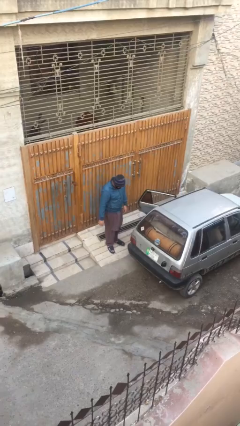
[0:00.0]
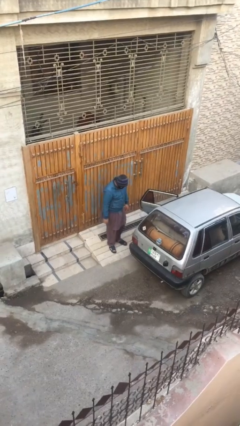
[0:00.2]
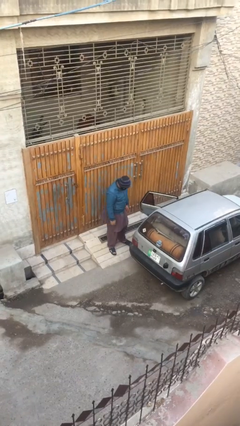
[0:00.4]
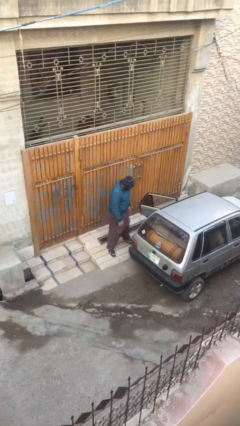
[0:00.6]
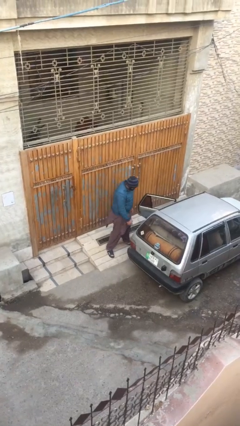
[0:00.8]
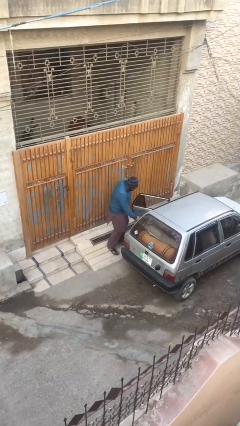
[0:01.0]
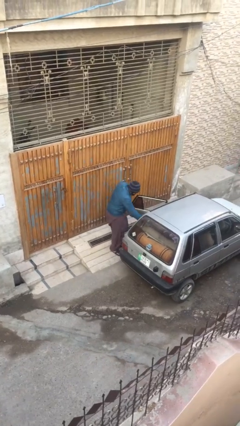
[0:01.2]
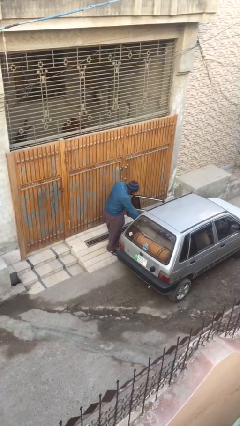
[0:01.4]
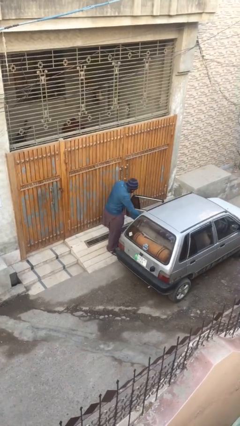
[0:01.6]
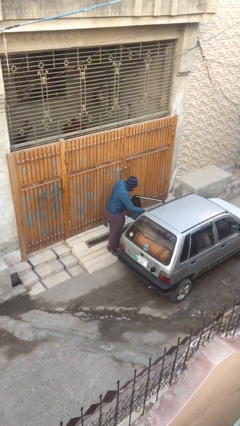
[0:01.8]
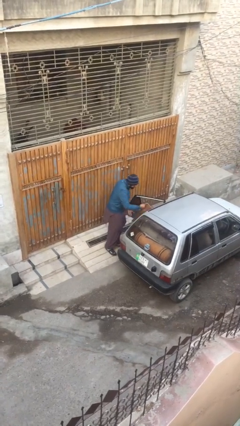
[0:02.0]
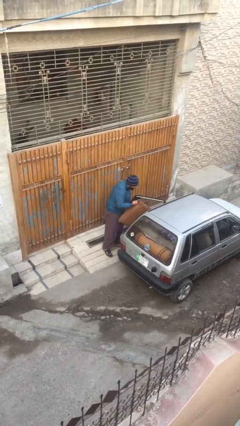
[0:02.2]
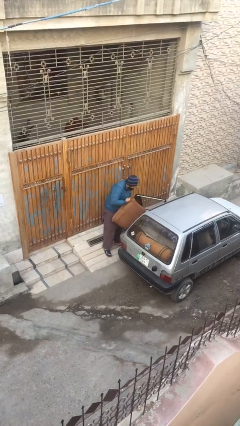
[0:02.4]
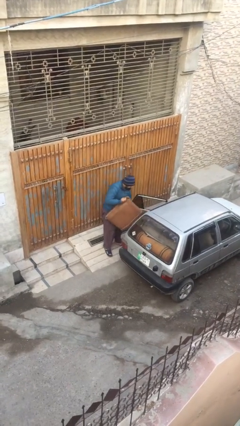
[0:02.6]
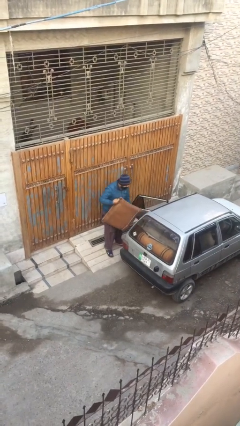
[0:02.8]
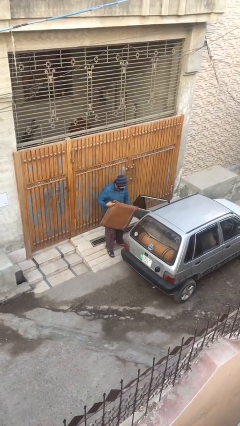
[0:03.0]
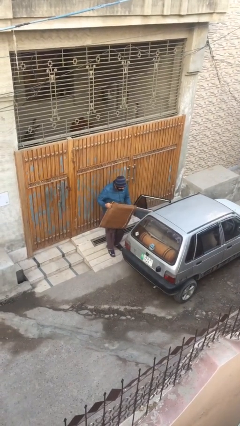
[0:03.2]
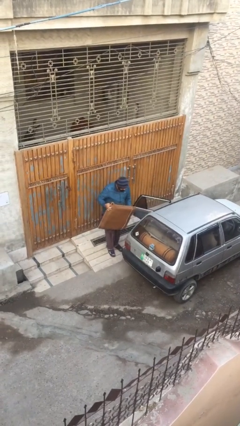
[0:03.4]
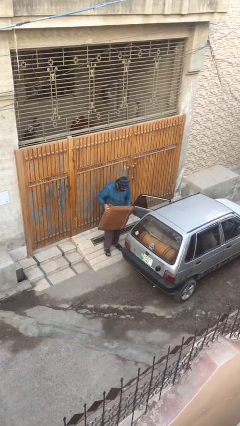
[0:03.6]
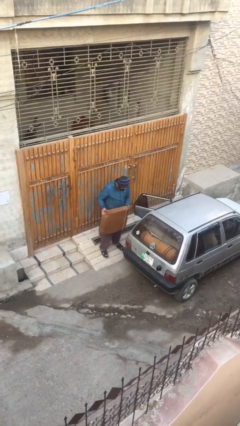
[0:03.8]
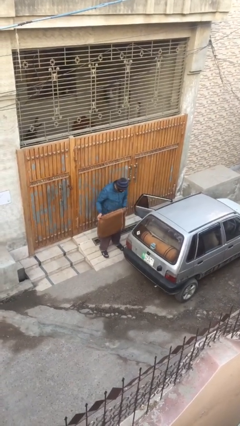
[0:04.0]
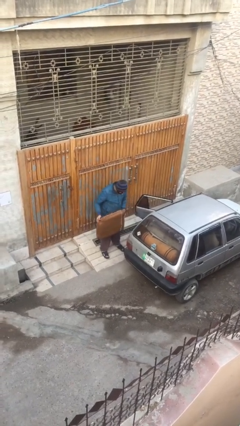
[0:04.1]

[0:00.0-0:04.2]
person unloads car

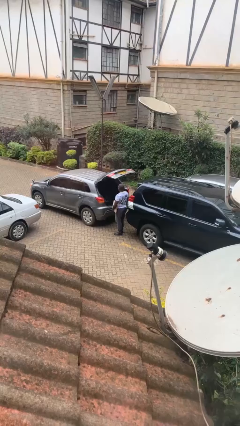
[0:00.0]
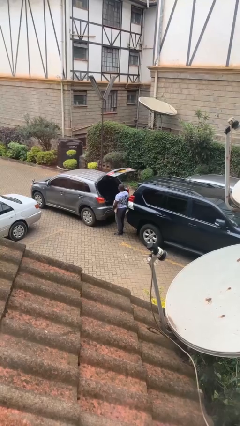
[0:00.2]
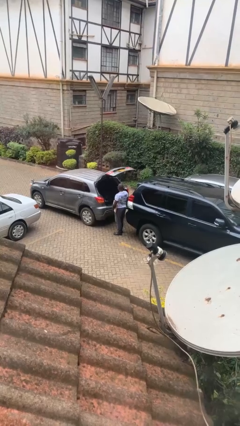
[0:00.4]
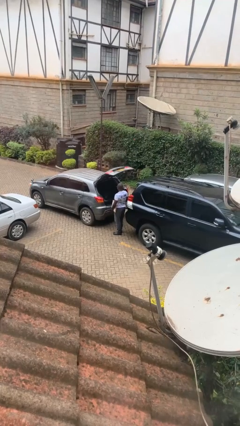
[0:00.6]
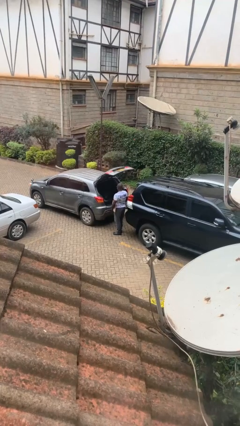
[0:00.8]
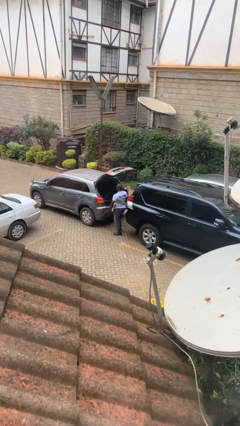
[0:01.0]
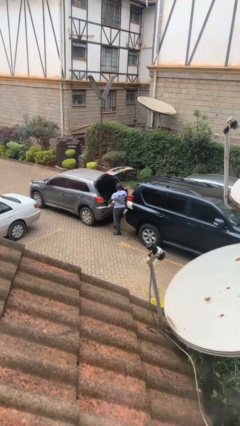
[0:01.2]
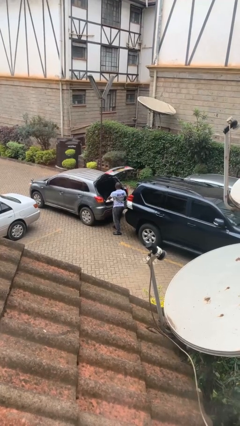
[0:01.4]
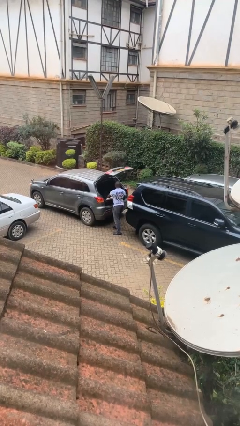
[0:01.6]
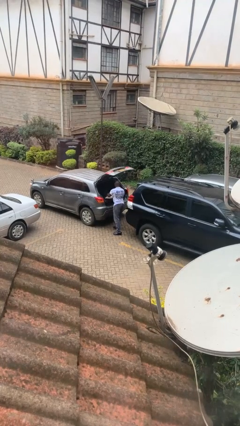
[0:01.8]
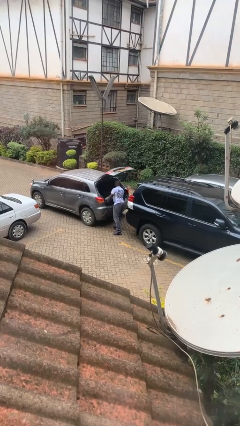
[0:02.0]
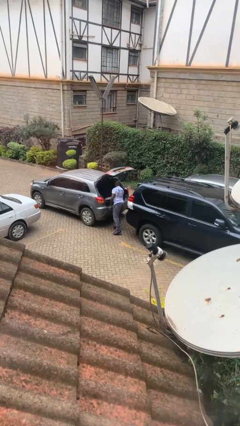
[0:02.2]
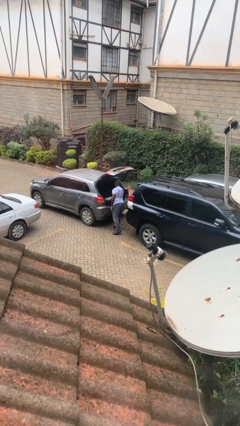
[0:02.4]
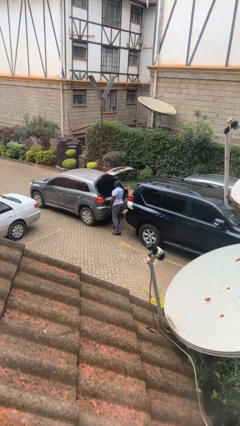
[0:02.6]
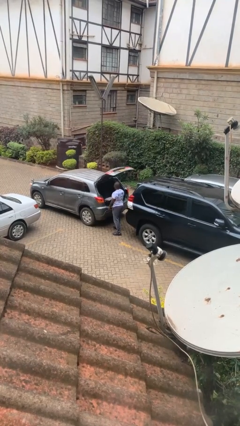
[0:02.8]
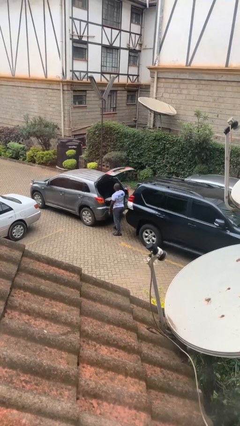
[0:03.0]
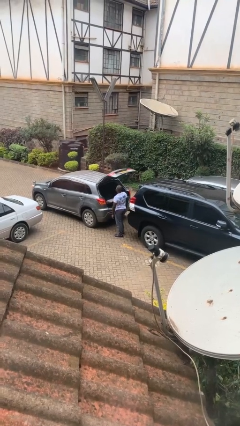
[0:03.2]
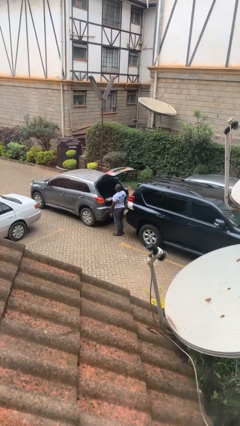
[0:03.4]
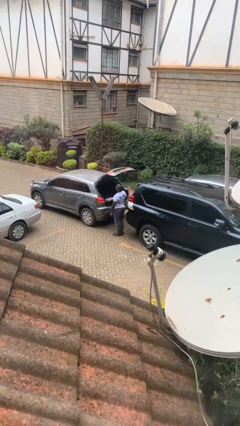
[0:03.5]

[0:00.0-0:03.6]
person loads car

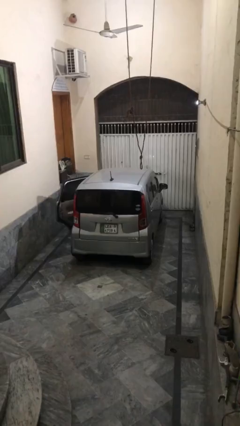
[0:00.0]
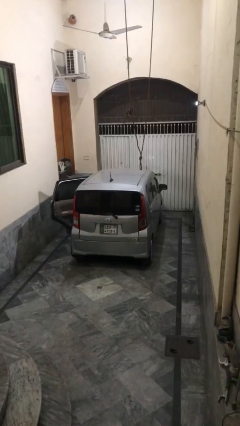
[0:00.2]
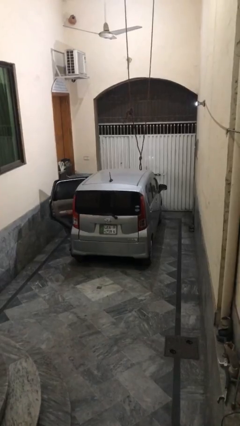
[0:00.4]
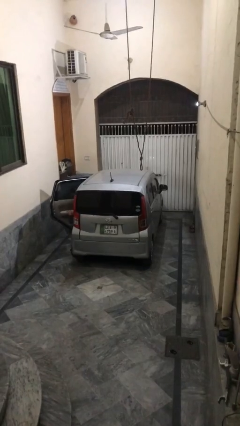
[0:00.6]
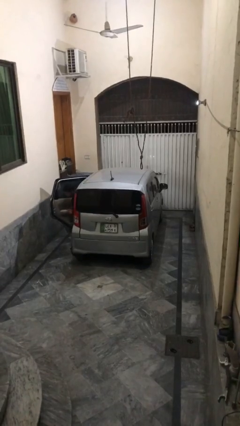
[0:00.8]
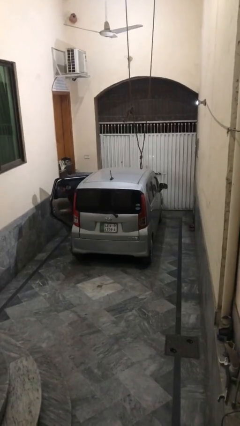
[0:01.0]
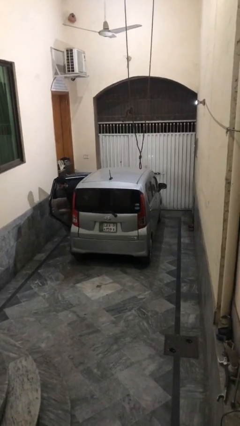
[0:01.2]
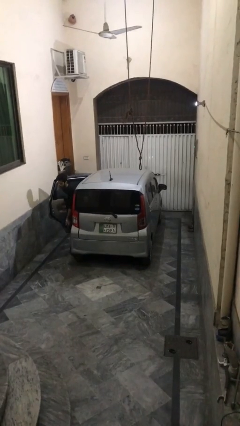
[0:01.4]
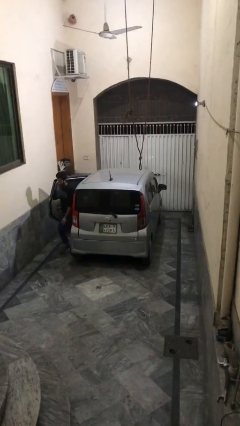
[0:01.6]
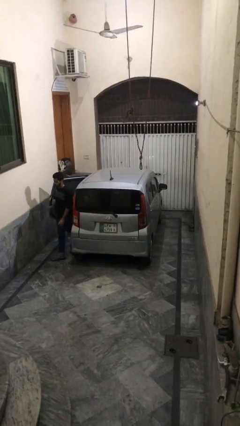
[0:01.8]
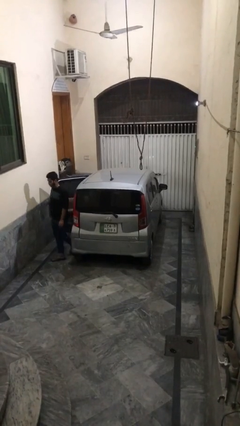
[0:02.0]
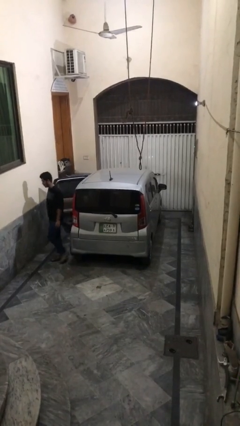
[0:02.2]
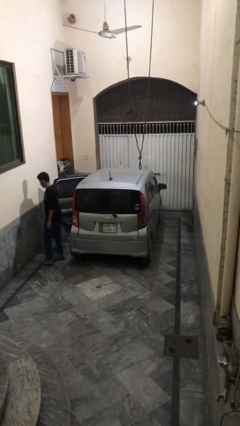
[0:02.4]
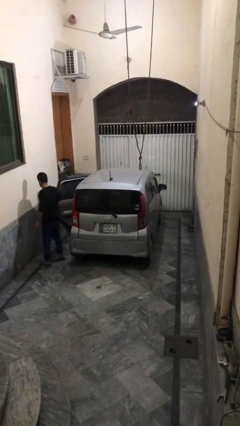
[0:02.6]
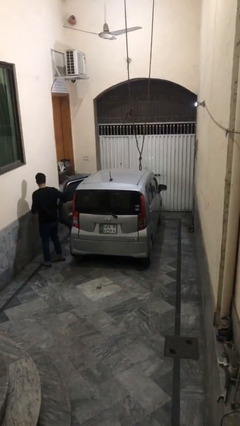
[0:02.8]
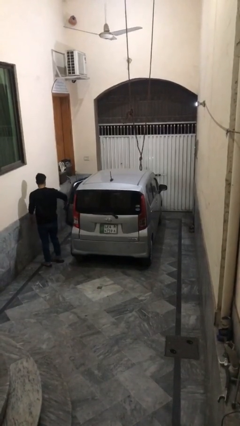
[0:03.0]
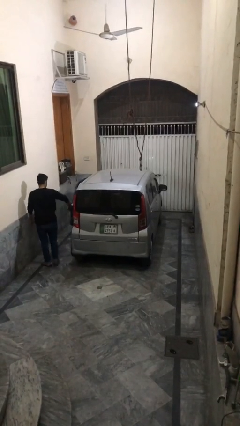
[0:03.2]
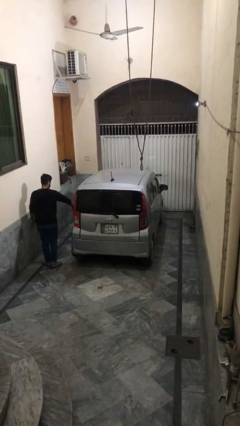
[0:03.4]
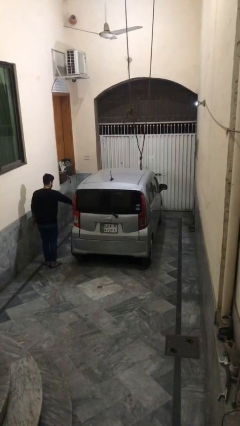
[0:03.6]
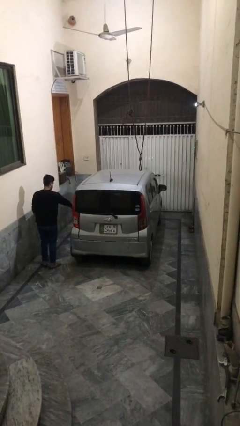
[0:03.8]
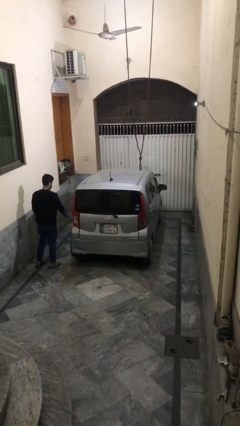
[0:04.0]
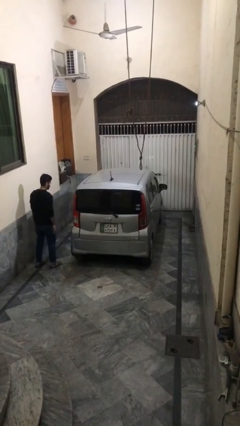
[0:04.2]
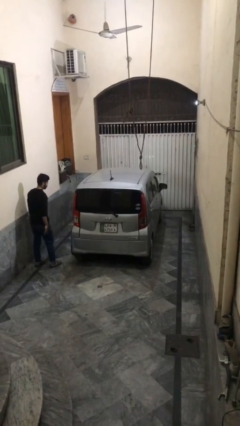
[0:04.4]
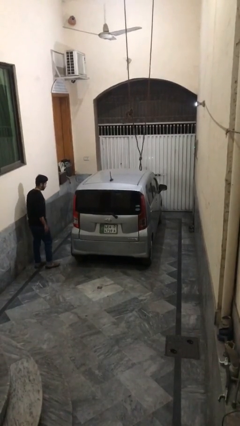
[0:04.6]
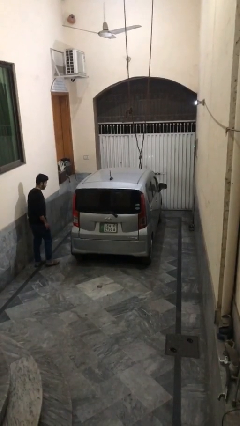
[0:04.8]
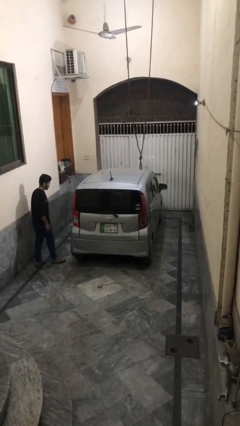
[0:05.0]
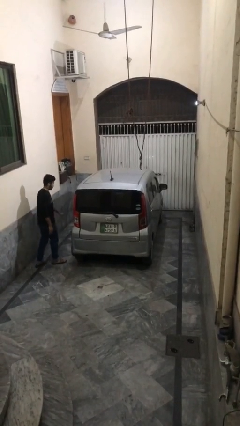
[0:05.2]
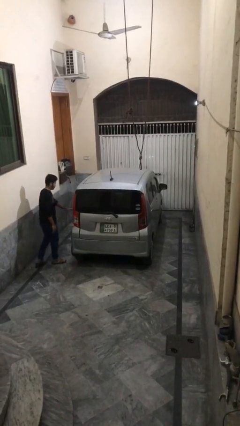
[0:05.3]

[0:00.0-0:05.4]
car drops off person

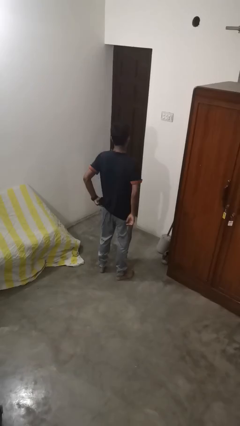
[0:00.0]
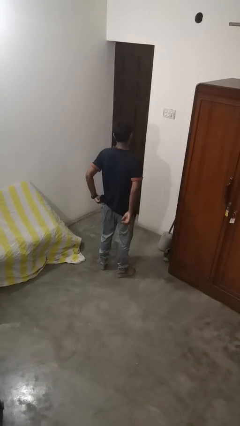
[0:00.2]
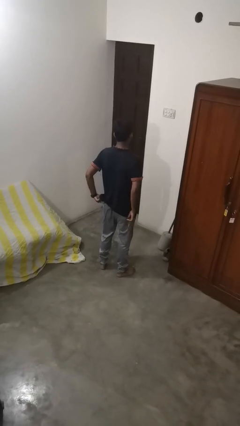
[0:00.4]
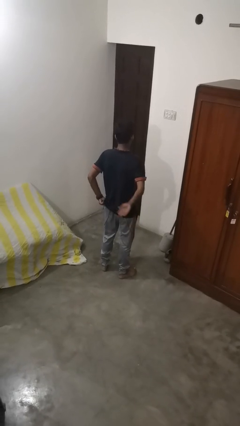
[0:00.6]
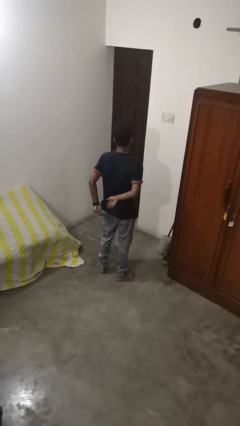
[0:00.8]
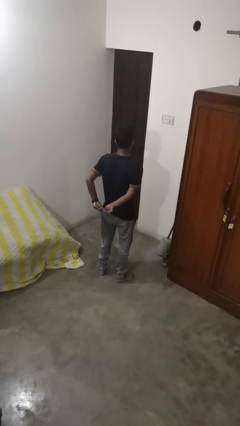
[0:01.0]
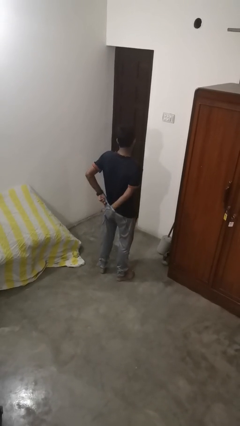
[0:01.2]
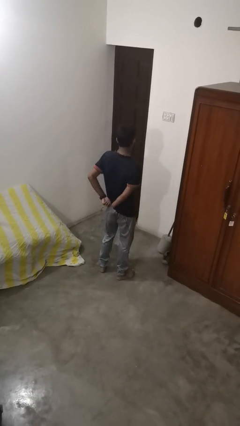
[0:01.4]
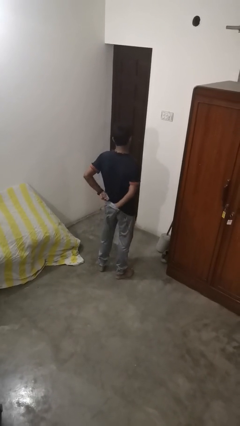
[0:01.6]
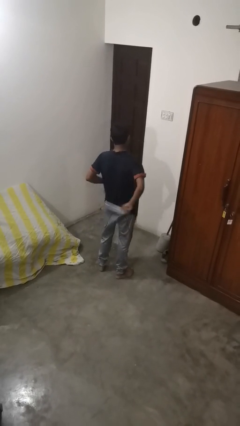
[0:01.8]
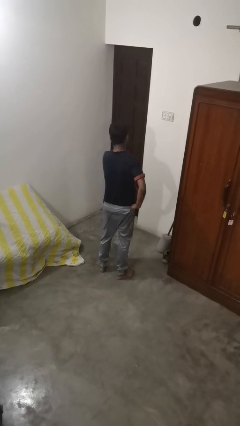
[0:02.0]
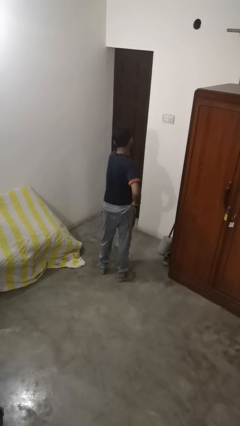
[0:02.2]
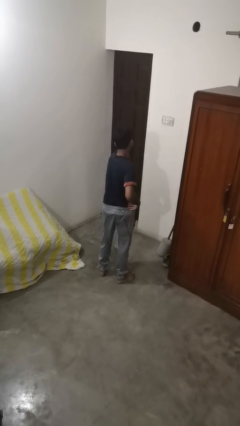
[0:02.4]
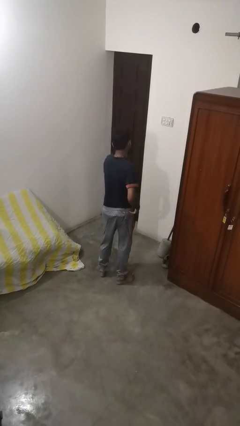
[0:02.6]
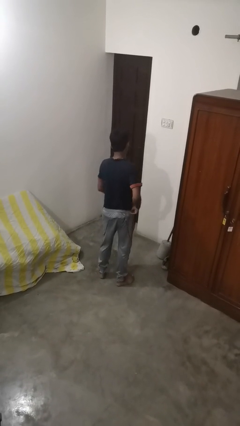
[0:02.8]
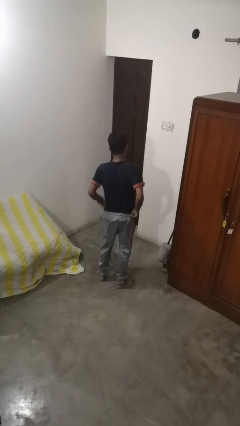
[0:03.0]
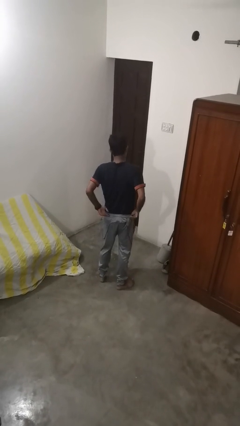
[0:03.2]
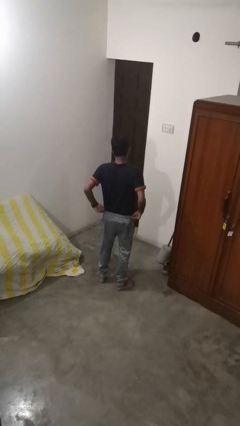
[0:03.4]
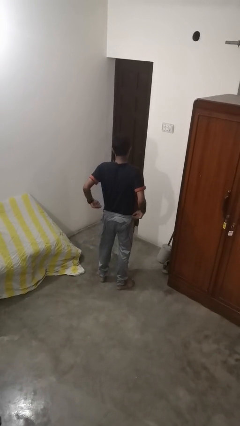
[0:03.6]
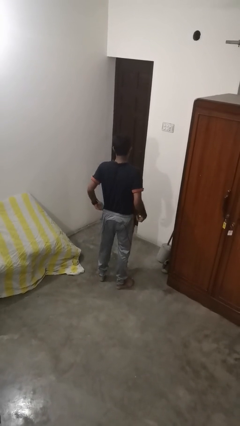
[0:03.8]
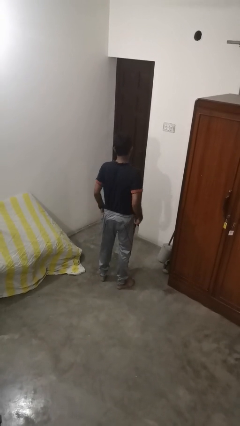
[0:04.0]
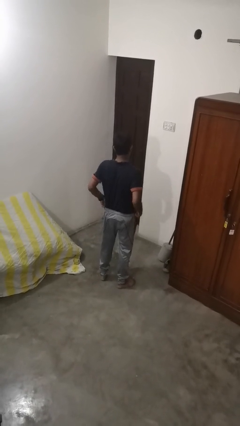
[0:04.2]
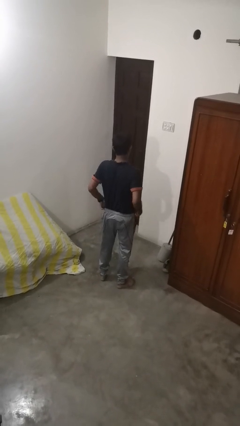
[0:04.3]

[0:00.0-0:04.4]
person tucks in shirt
